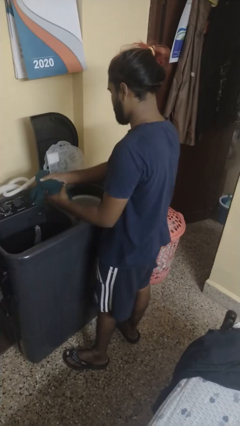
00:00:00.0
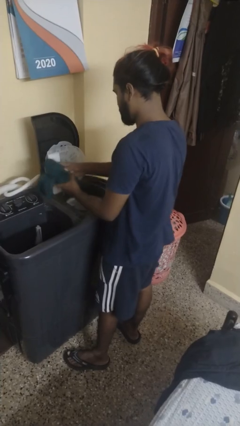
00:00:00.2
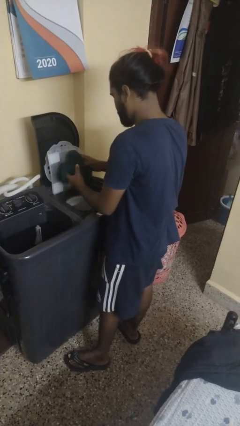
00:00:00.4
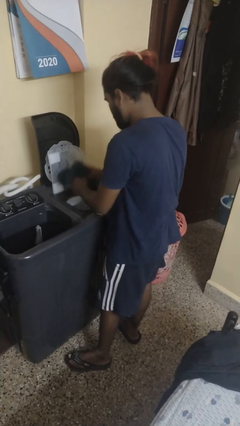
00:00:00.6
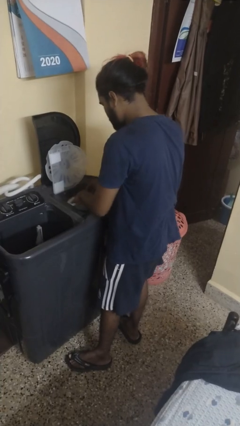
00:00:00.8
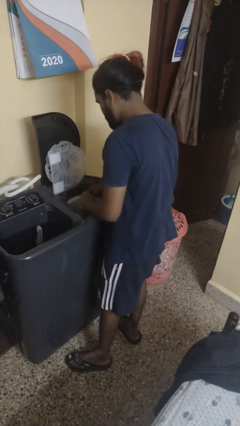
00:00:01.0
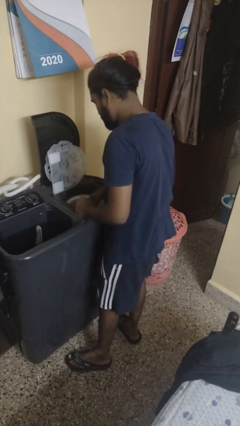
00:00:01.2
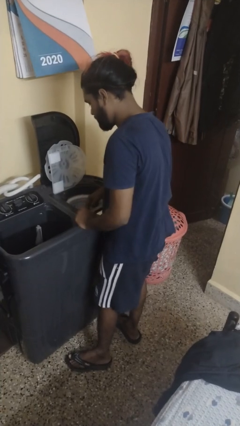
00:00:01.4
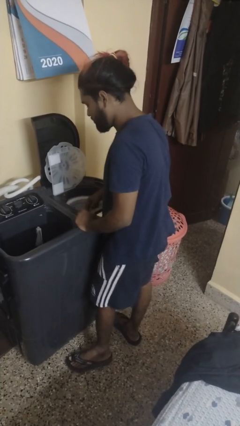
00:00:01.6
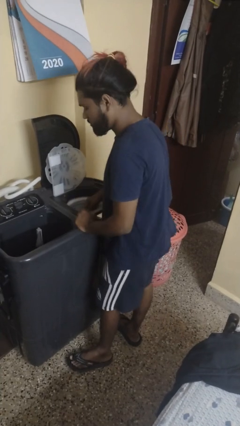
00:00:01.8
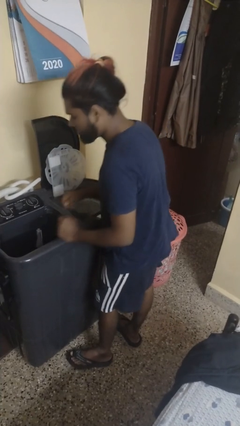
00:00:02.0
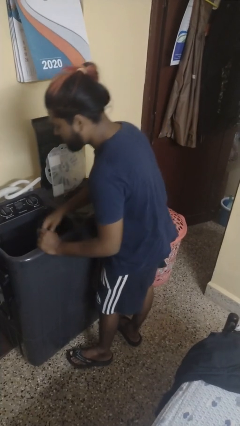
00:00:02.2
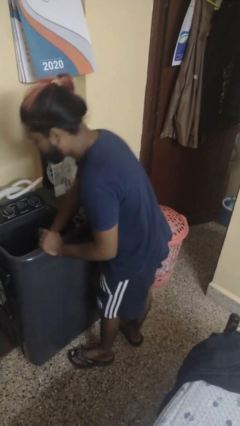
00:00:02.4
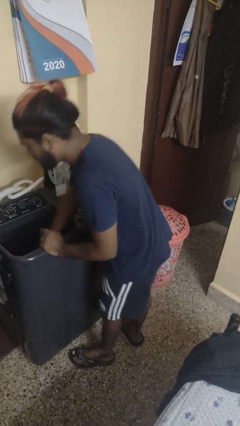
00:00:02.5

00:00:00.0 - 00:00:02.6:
person loads dryer

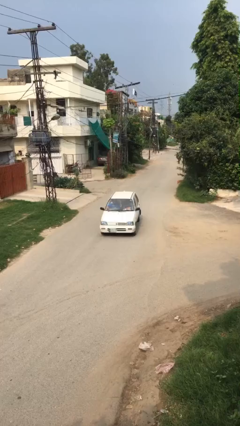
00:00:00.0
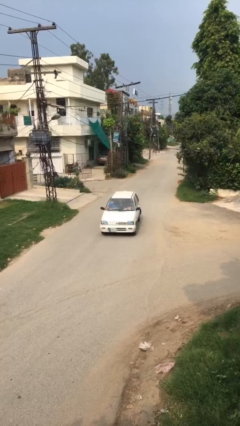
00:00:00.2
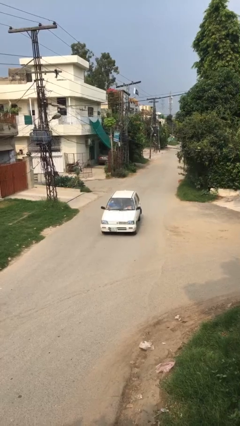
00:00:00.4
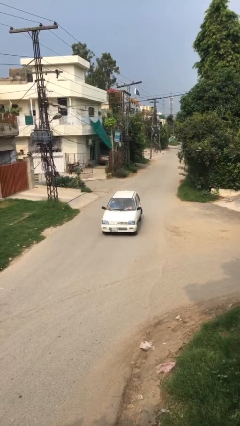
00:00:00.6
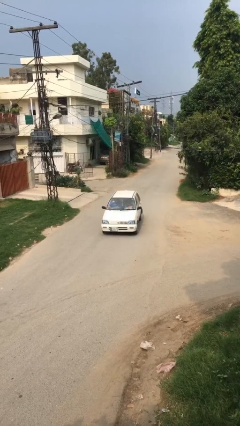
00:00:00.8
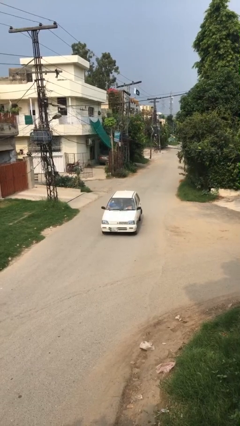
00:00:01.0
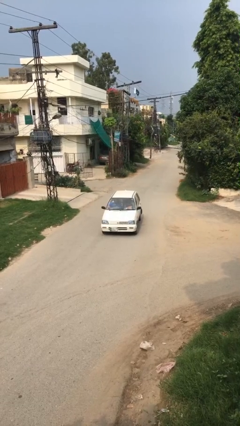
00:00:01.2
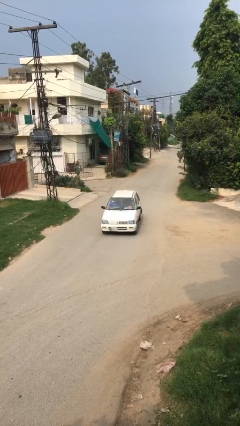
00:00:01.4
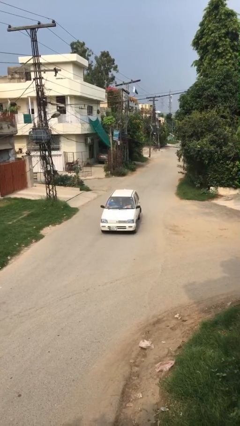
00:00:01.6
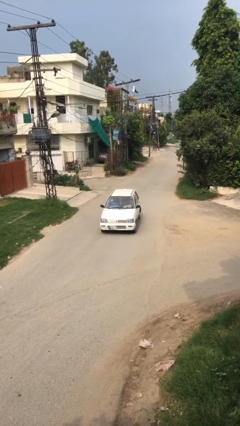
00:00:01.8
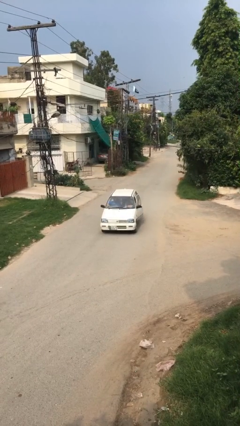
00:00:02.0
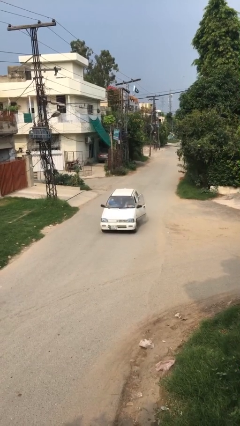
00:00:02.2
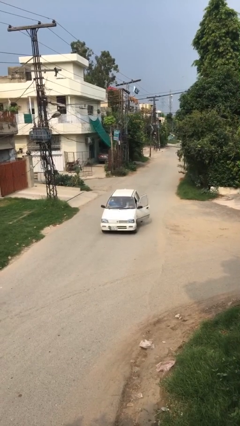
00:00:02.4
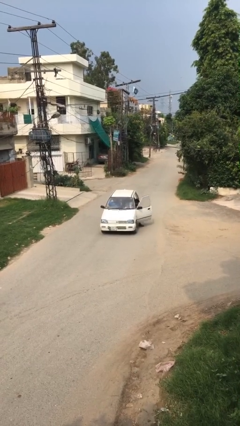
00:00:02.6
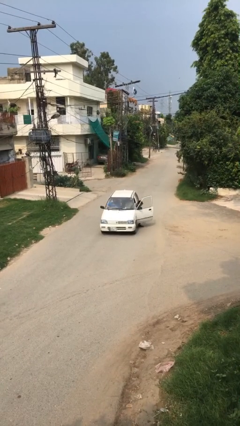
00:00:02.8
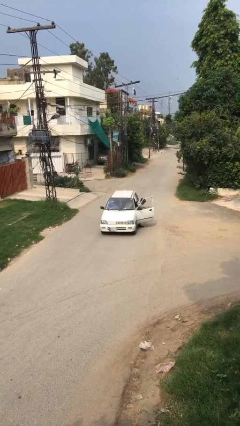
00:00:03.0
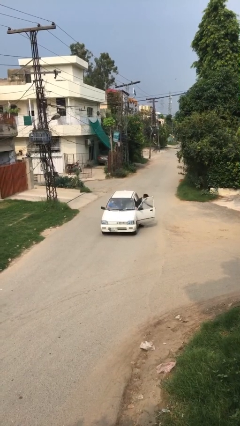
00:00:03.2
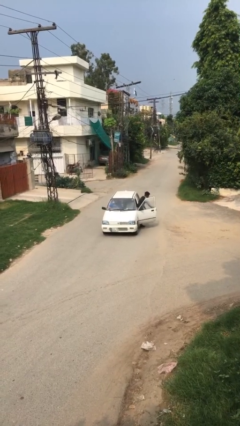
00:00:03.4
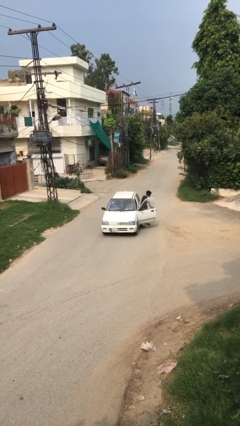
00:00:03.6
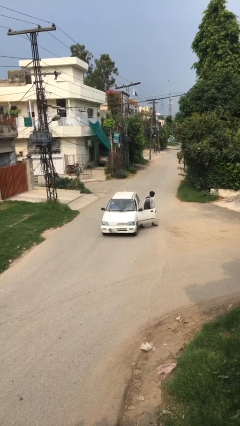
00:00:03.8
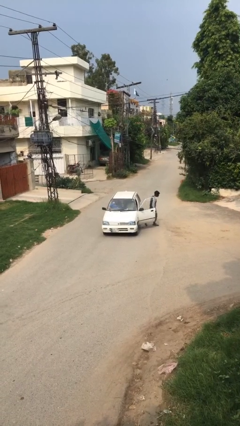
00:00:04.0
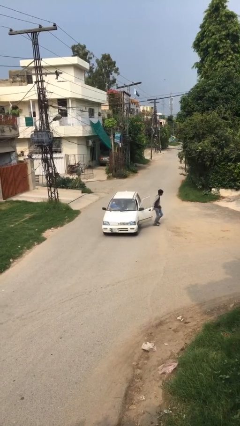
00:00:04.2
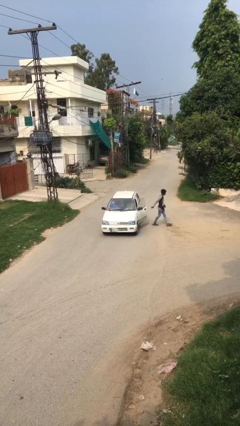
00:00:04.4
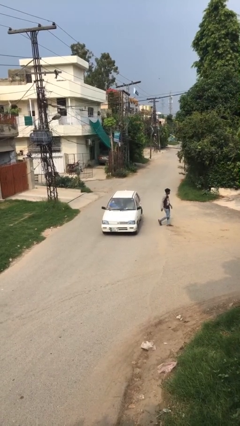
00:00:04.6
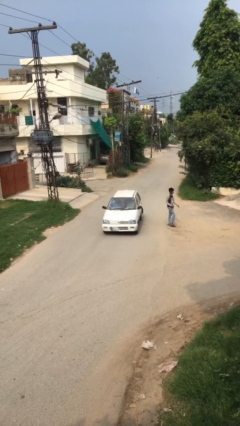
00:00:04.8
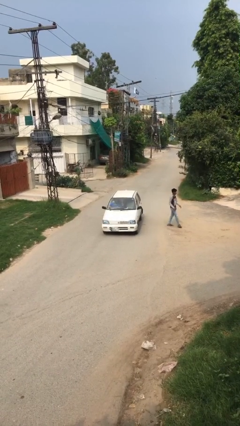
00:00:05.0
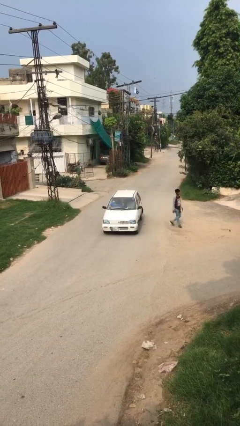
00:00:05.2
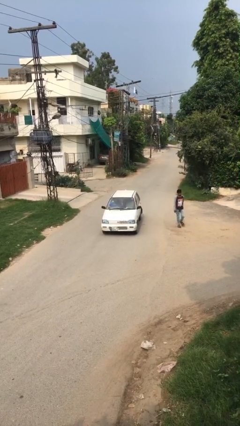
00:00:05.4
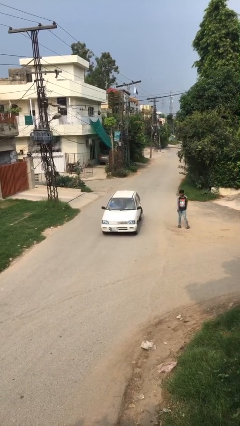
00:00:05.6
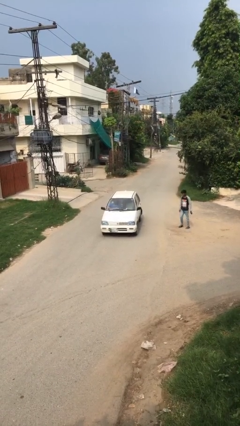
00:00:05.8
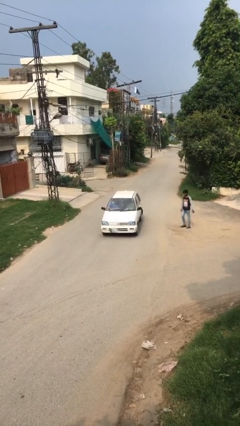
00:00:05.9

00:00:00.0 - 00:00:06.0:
car drops off person

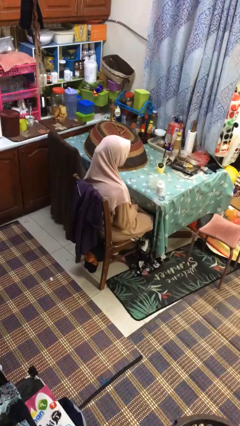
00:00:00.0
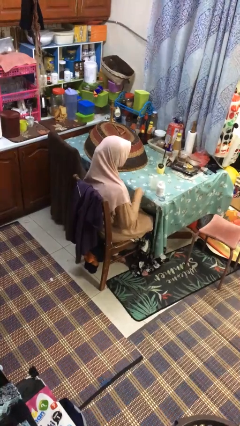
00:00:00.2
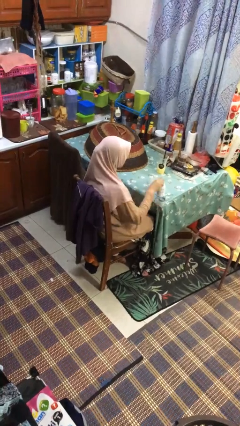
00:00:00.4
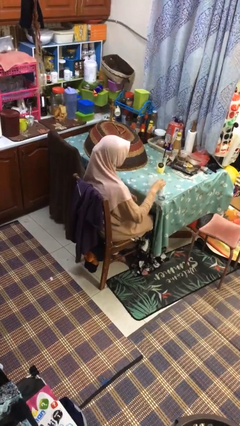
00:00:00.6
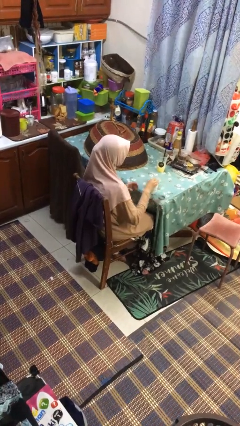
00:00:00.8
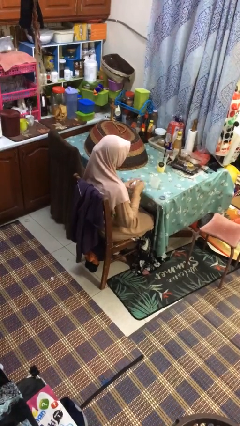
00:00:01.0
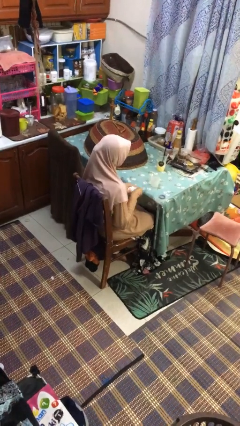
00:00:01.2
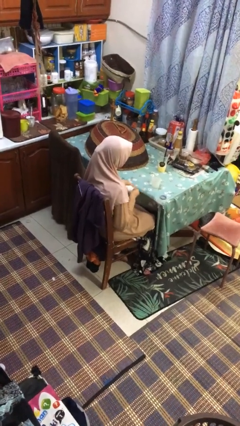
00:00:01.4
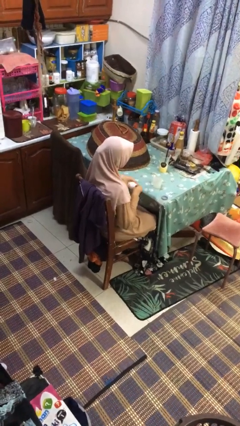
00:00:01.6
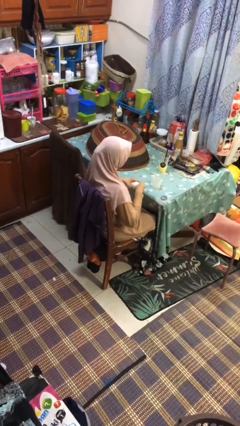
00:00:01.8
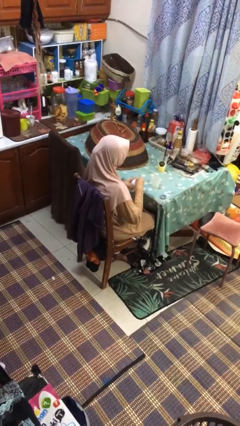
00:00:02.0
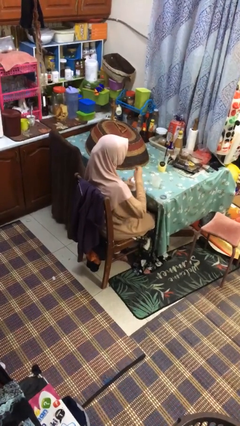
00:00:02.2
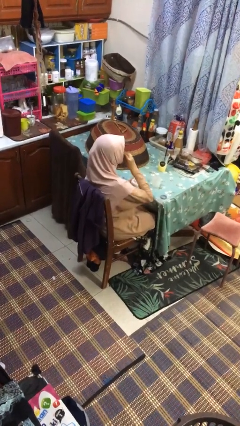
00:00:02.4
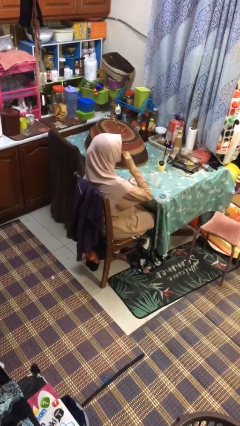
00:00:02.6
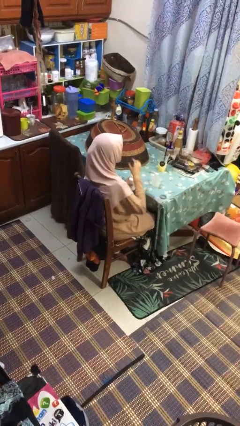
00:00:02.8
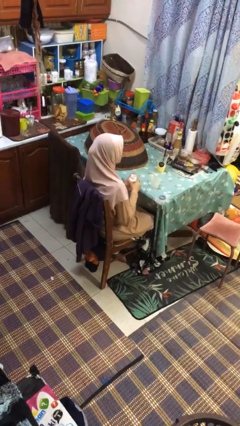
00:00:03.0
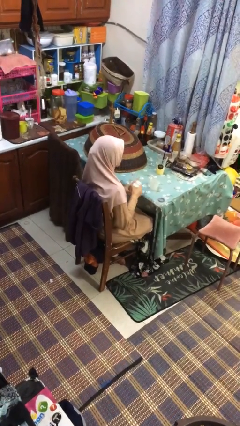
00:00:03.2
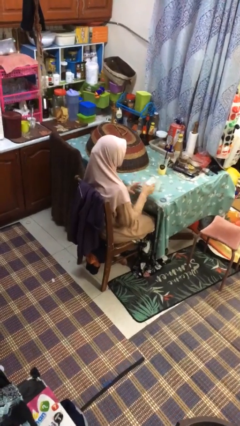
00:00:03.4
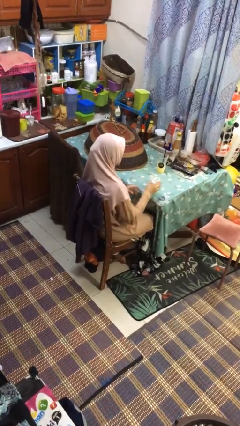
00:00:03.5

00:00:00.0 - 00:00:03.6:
person takes medicine pills

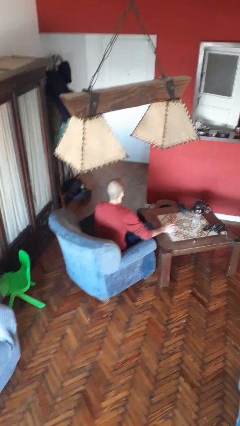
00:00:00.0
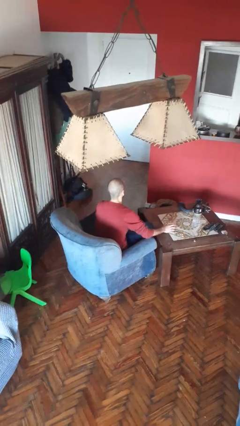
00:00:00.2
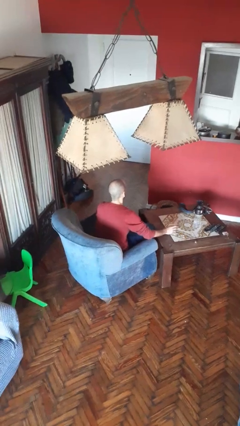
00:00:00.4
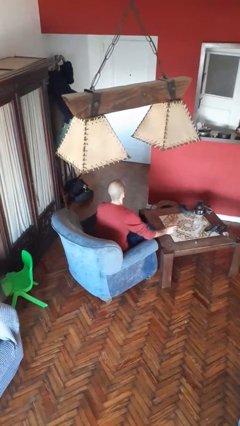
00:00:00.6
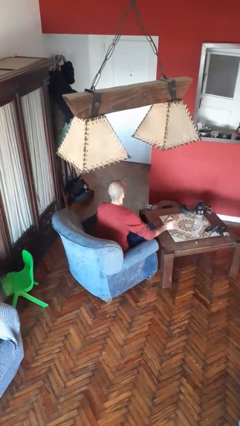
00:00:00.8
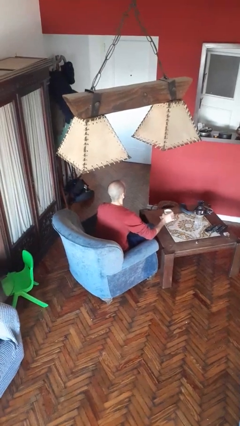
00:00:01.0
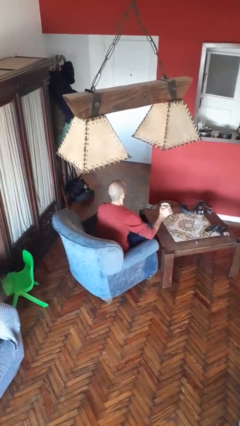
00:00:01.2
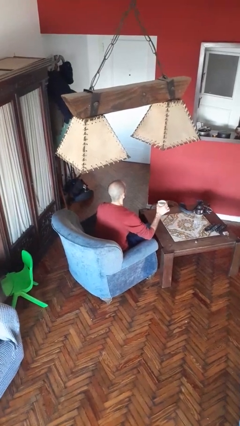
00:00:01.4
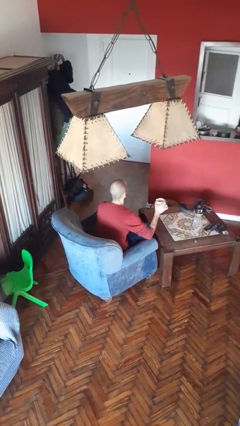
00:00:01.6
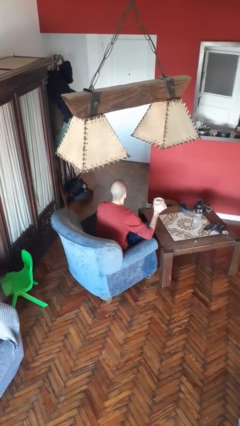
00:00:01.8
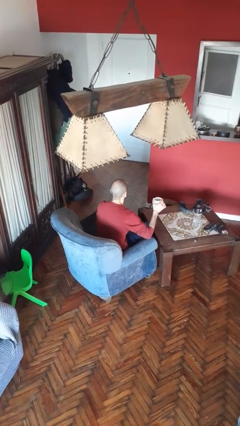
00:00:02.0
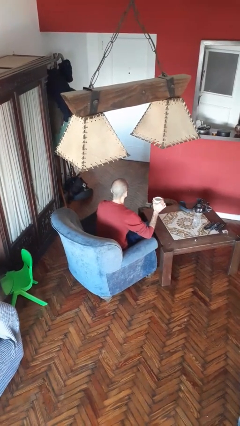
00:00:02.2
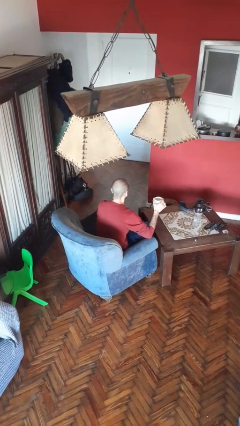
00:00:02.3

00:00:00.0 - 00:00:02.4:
person picks up object from table

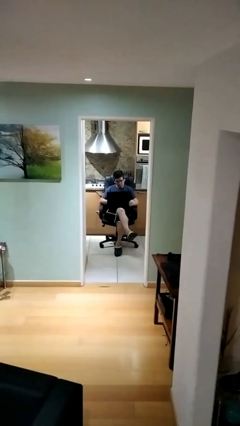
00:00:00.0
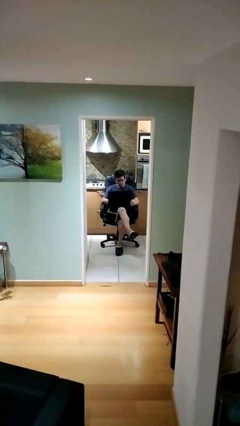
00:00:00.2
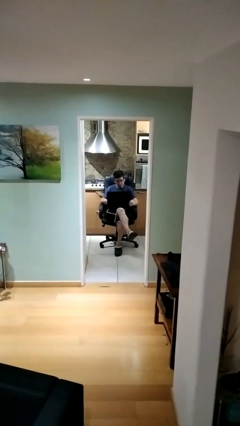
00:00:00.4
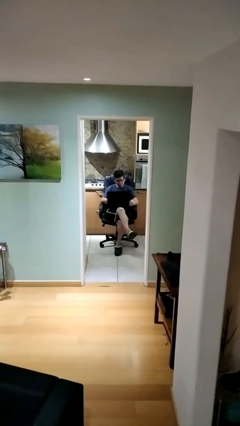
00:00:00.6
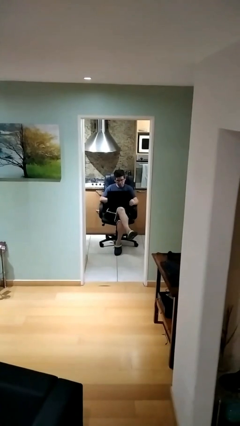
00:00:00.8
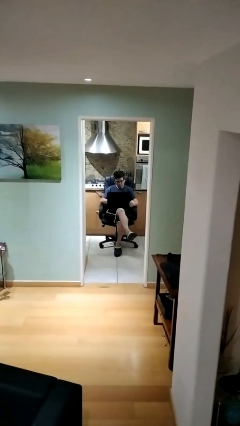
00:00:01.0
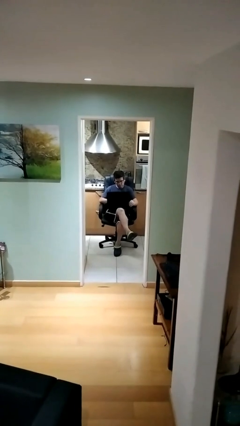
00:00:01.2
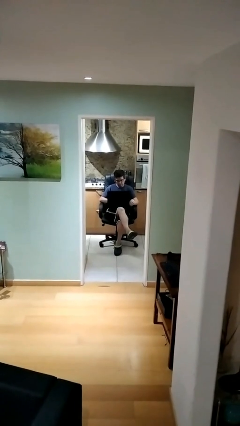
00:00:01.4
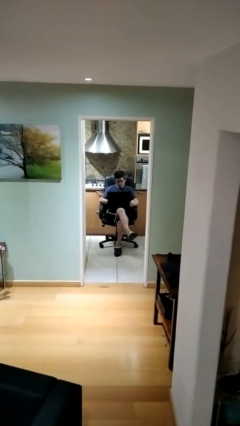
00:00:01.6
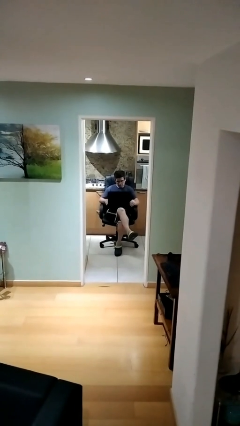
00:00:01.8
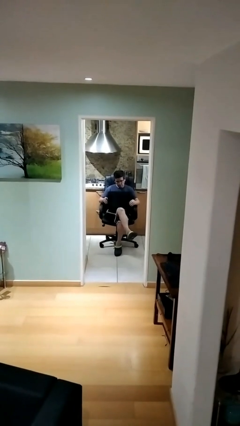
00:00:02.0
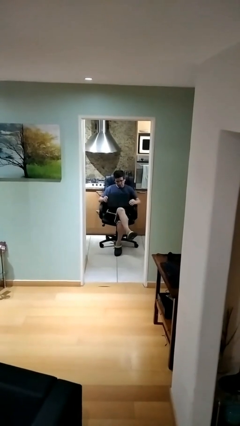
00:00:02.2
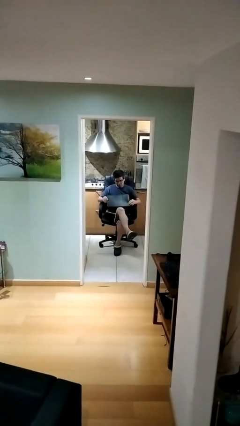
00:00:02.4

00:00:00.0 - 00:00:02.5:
person interacts with laptop

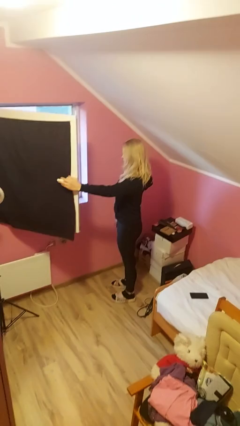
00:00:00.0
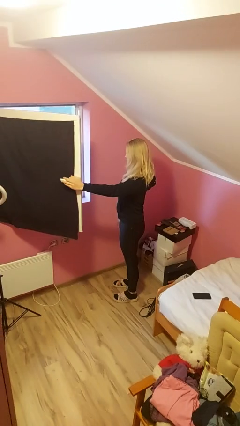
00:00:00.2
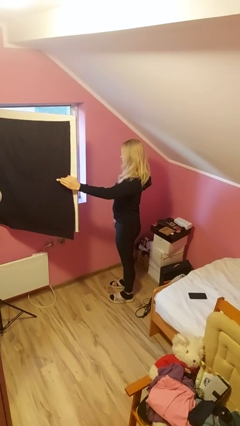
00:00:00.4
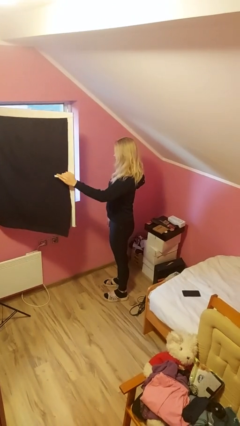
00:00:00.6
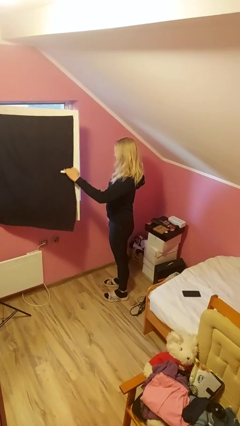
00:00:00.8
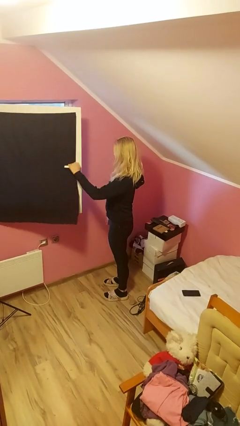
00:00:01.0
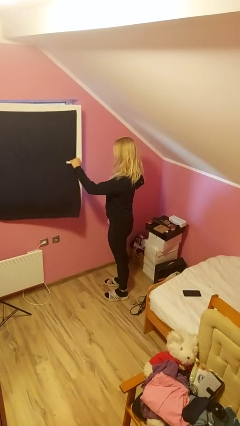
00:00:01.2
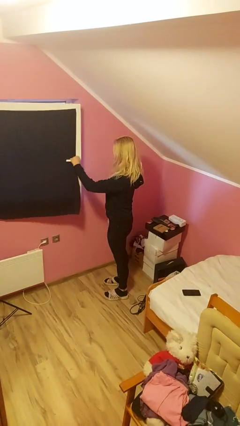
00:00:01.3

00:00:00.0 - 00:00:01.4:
person closes home window
